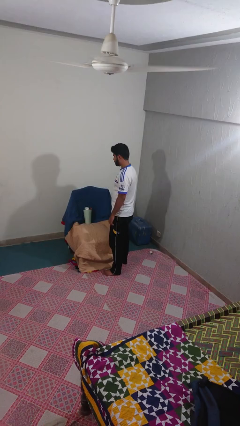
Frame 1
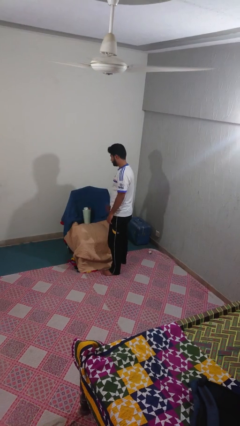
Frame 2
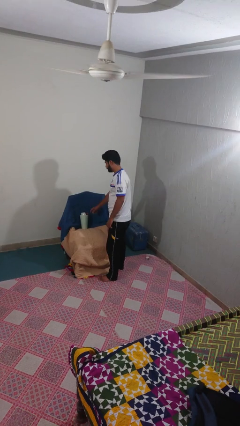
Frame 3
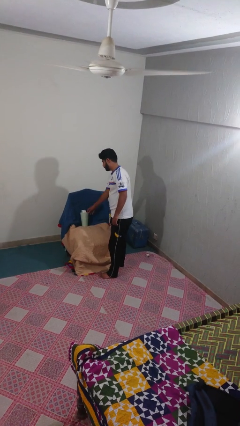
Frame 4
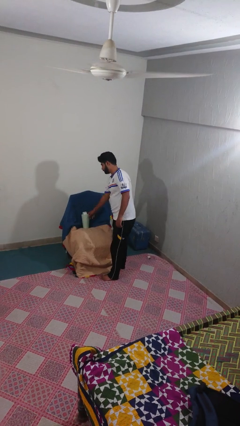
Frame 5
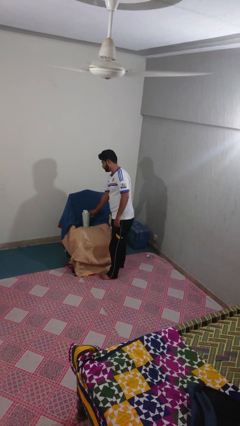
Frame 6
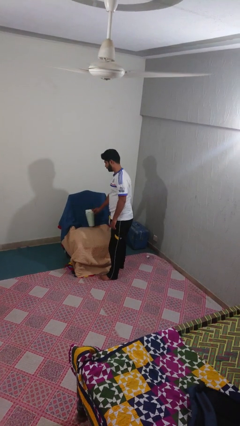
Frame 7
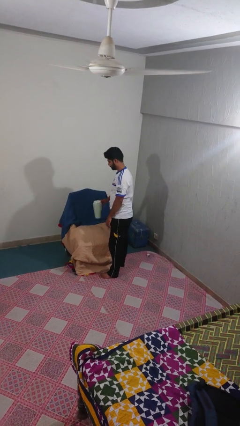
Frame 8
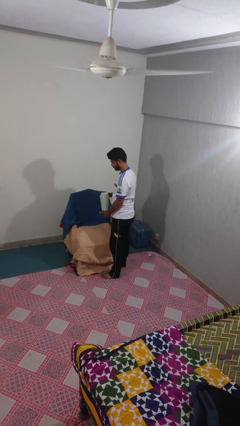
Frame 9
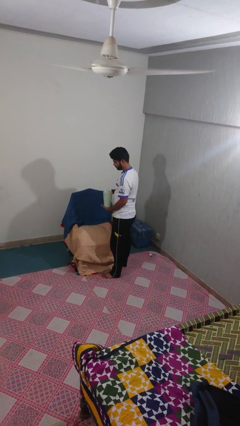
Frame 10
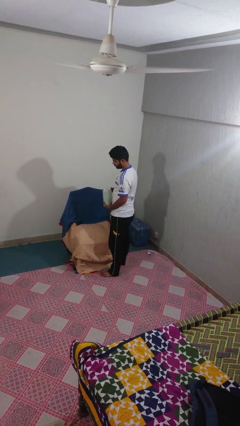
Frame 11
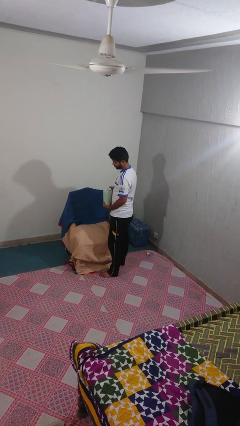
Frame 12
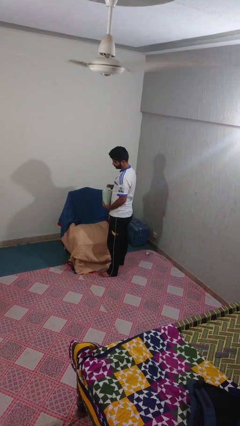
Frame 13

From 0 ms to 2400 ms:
person picks up object from couch

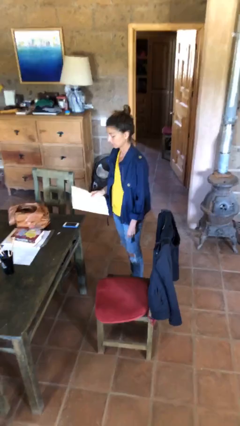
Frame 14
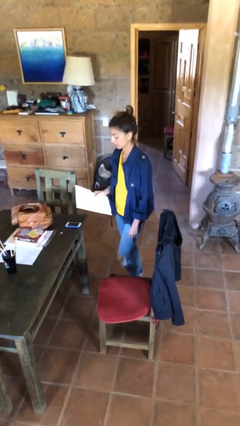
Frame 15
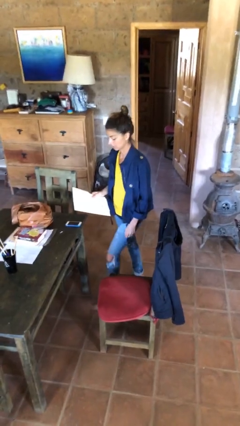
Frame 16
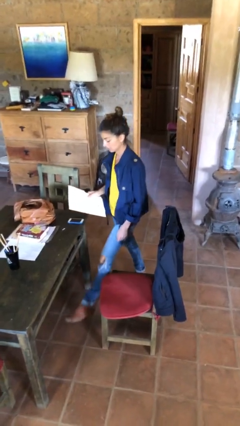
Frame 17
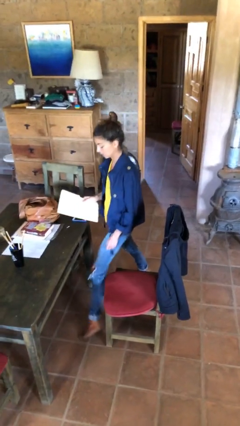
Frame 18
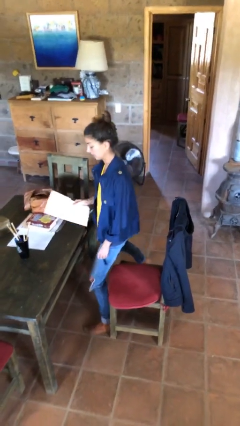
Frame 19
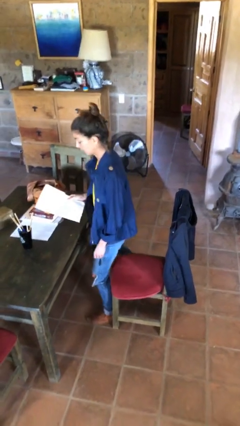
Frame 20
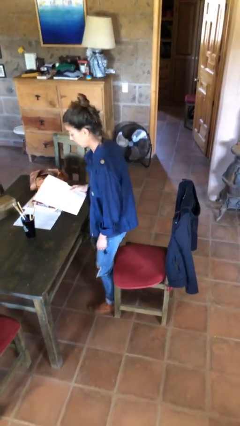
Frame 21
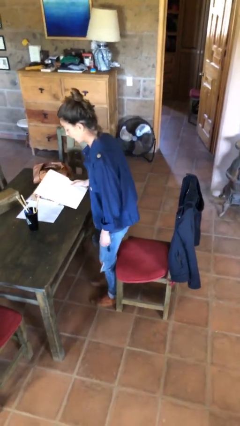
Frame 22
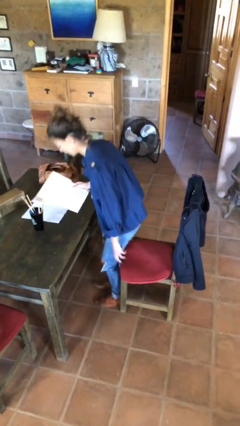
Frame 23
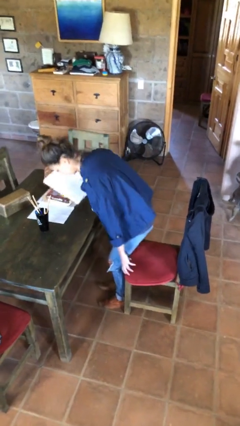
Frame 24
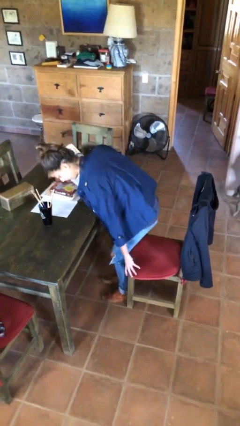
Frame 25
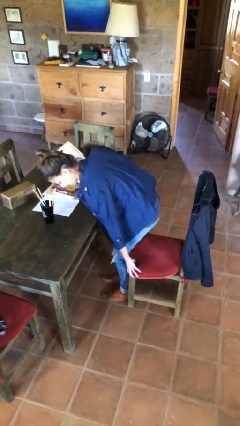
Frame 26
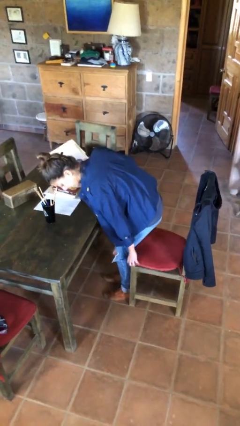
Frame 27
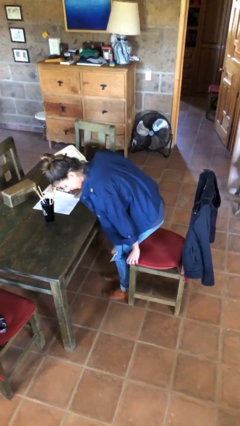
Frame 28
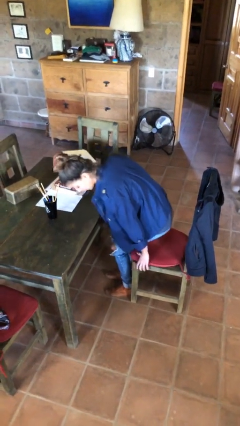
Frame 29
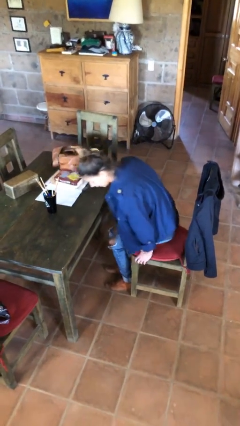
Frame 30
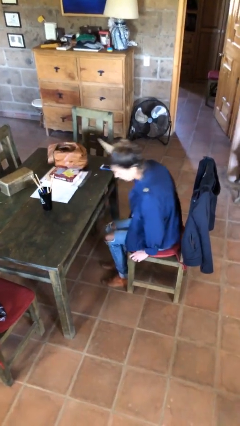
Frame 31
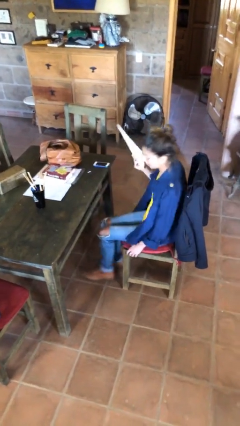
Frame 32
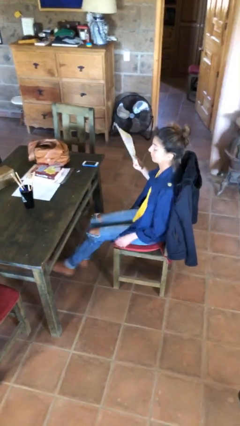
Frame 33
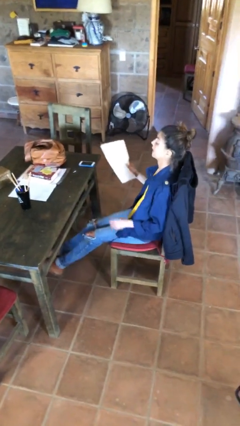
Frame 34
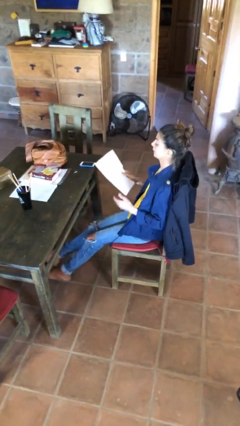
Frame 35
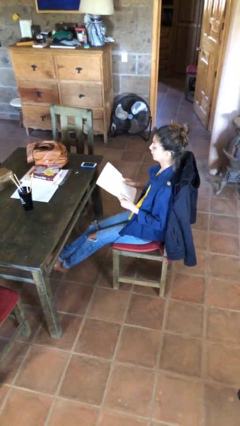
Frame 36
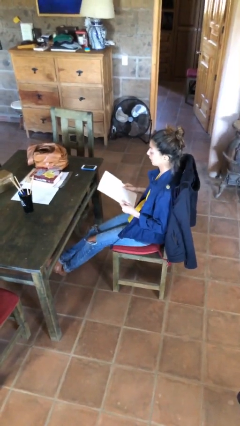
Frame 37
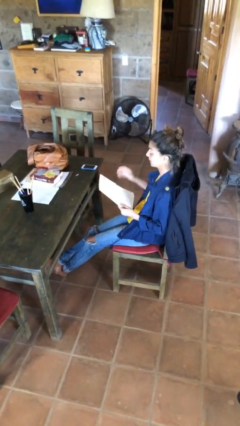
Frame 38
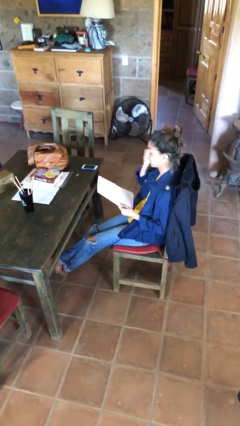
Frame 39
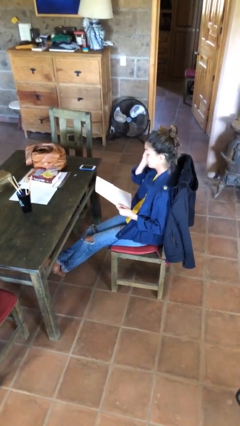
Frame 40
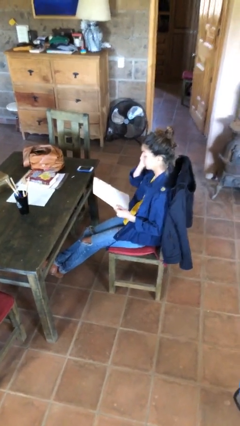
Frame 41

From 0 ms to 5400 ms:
person sits down

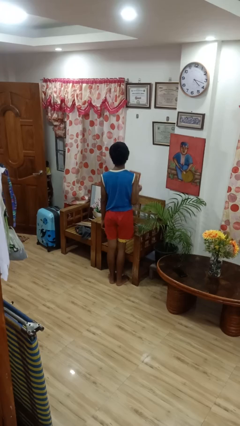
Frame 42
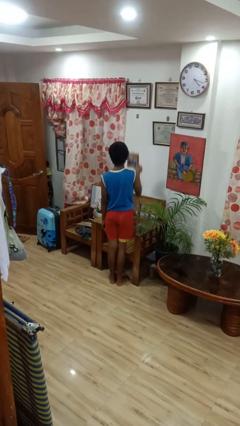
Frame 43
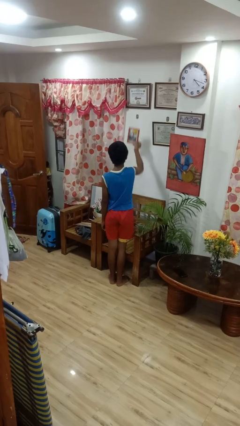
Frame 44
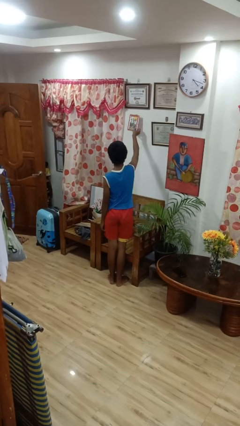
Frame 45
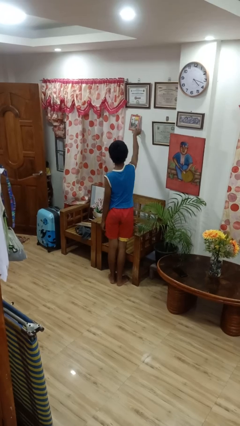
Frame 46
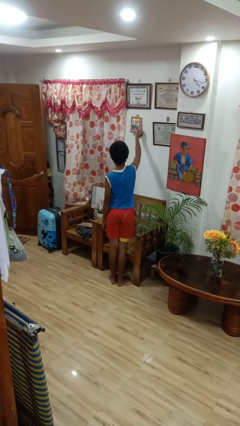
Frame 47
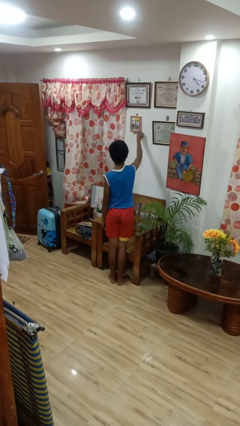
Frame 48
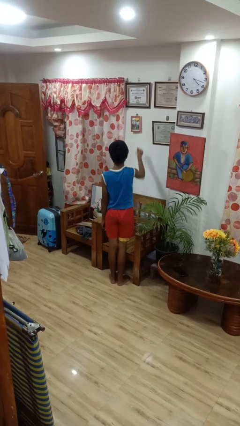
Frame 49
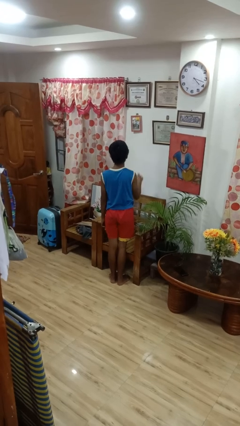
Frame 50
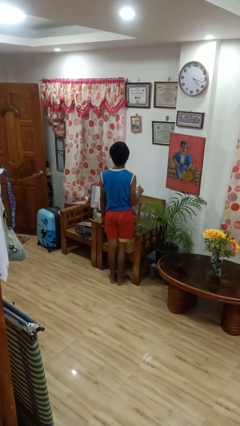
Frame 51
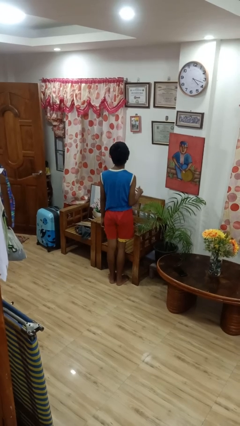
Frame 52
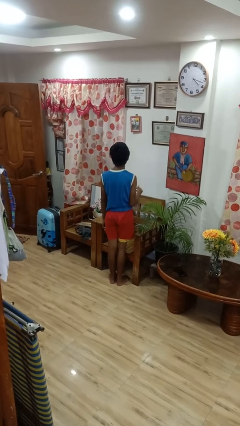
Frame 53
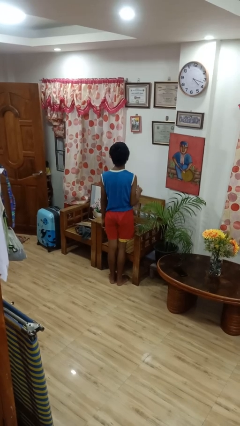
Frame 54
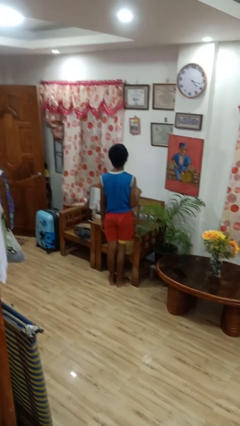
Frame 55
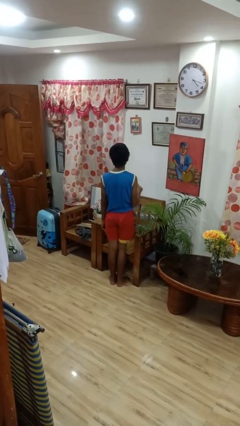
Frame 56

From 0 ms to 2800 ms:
person puts up picture frame

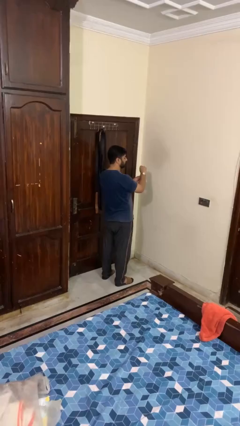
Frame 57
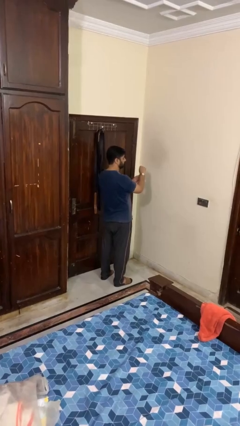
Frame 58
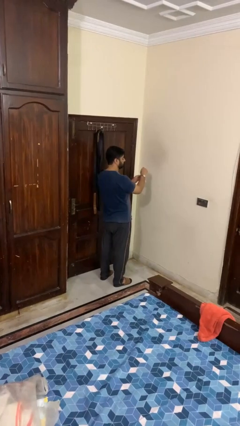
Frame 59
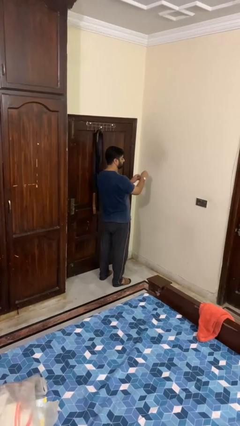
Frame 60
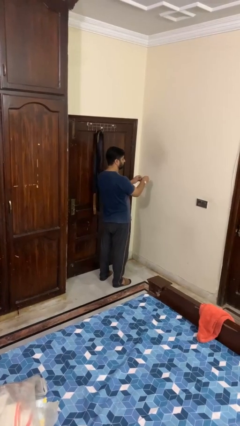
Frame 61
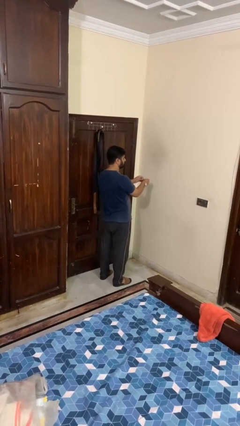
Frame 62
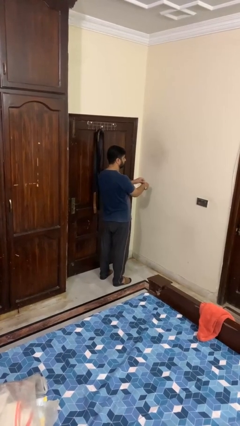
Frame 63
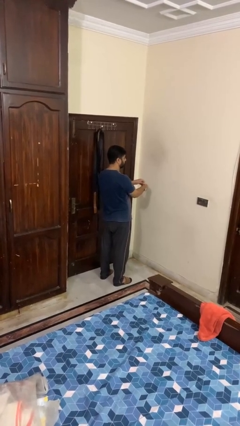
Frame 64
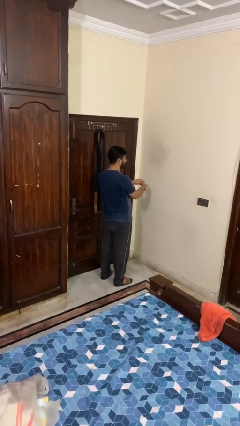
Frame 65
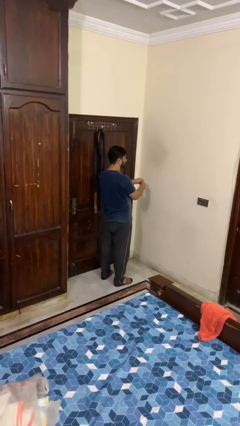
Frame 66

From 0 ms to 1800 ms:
person takes off wristwatch

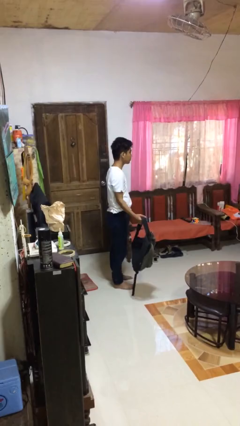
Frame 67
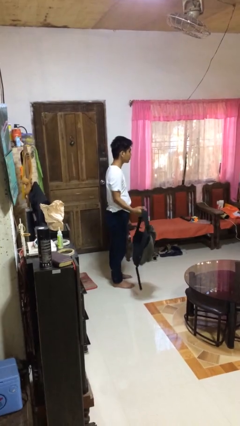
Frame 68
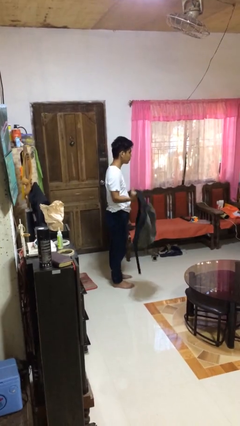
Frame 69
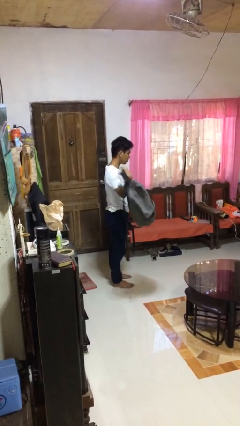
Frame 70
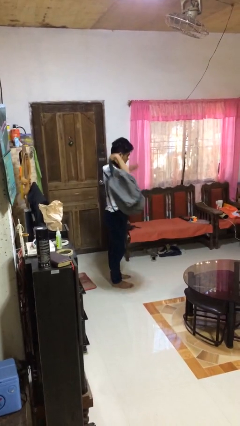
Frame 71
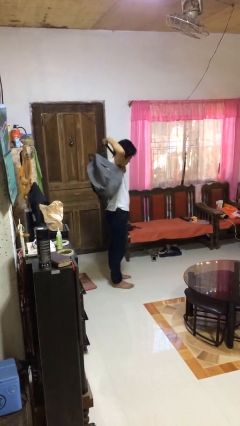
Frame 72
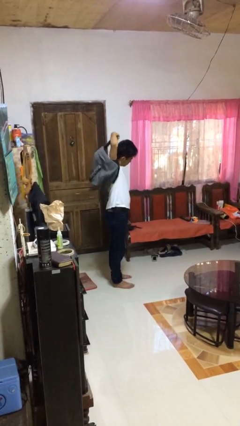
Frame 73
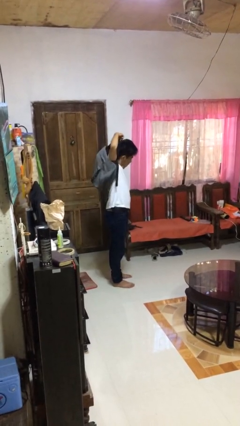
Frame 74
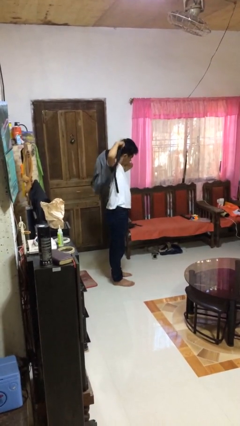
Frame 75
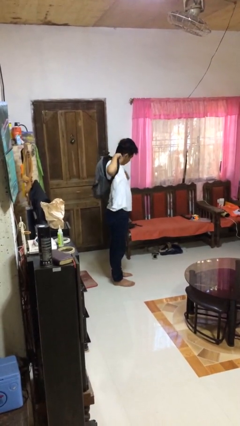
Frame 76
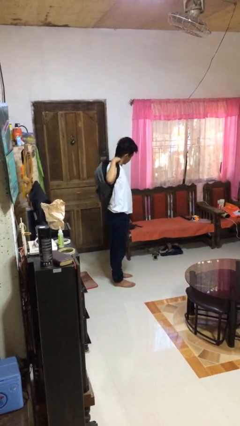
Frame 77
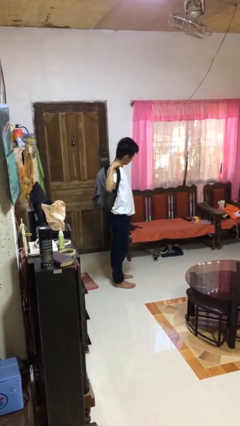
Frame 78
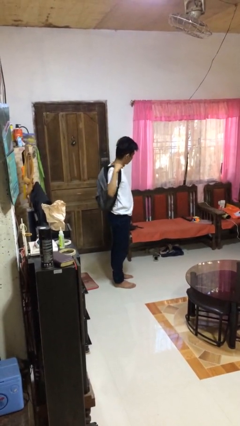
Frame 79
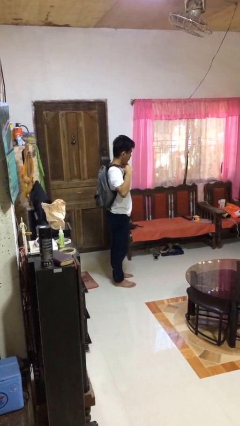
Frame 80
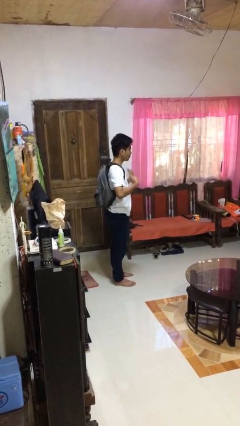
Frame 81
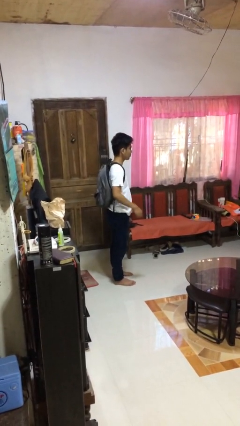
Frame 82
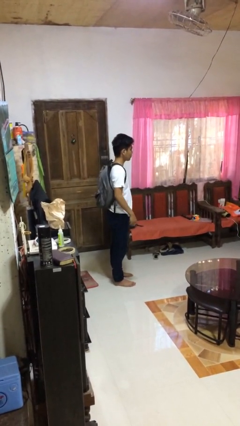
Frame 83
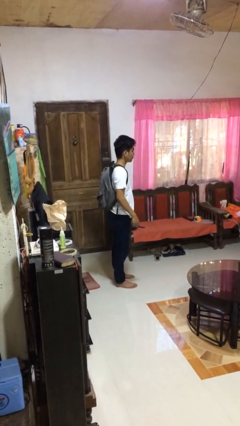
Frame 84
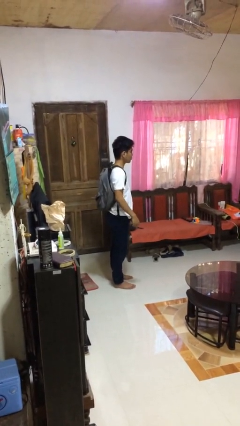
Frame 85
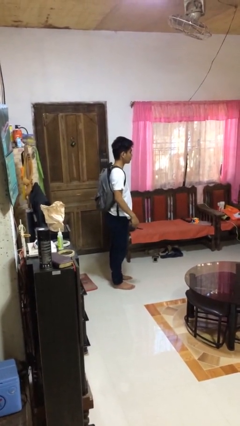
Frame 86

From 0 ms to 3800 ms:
person puts on backpack

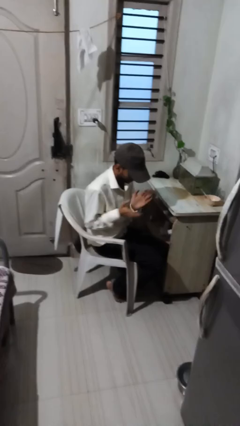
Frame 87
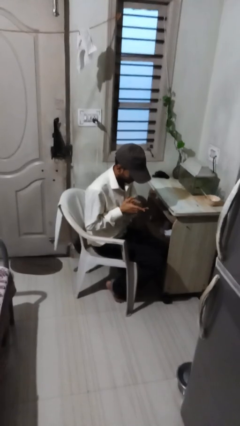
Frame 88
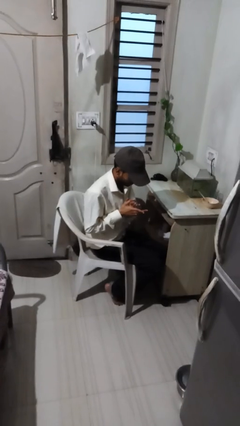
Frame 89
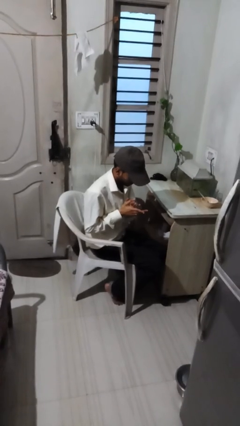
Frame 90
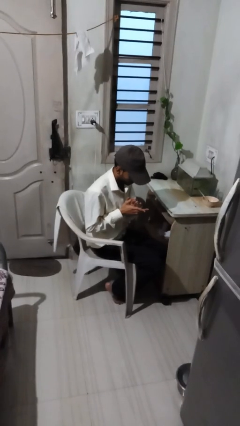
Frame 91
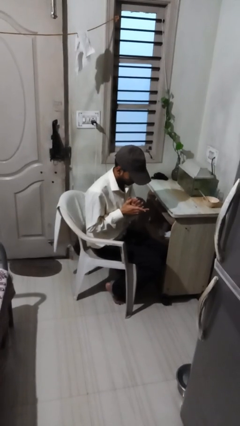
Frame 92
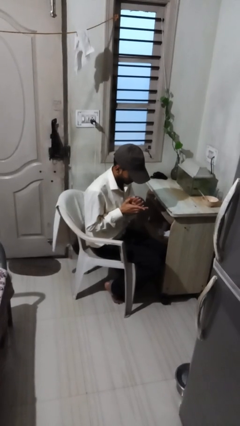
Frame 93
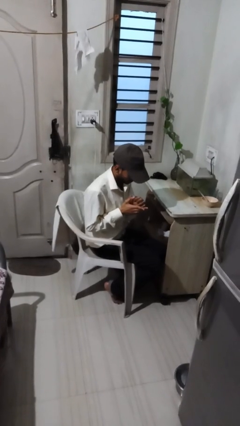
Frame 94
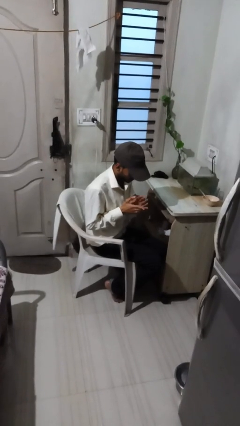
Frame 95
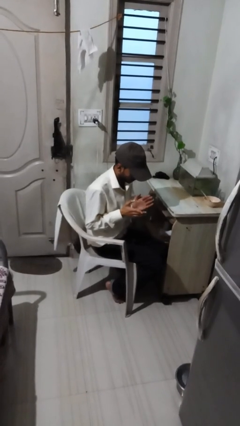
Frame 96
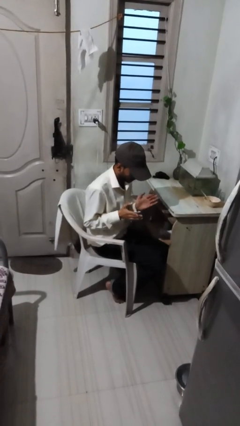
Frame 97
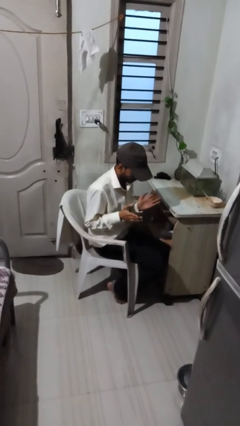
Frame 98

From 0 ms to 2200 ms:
person claps hands
